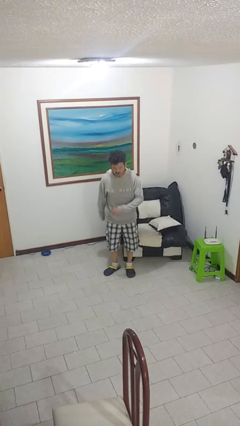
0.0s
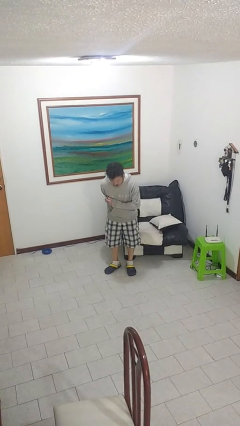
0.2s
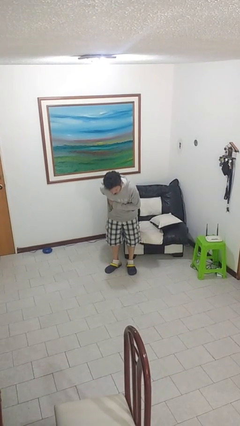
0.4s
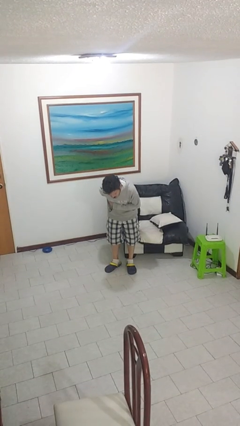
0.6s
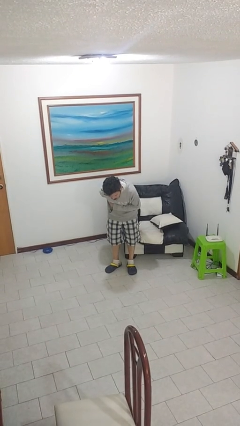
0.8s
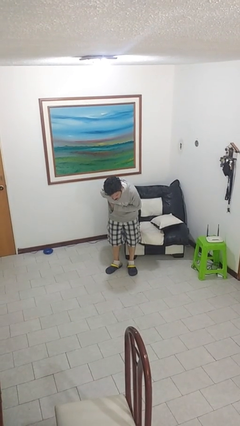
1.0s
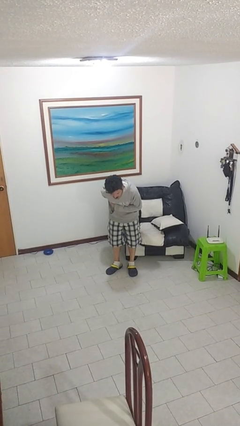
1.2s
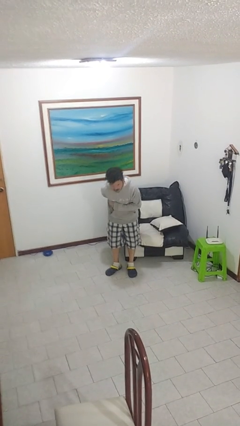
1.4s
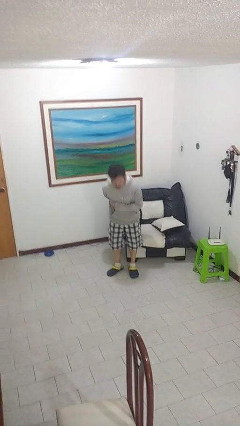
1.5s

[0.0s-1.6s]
person bows

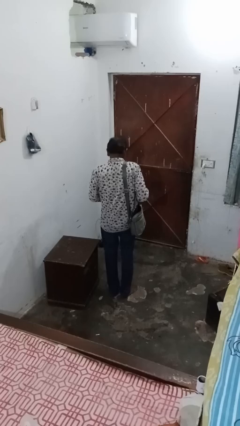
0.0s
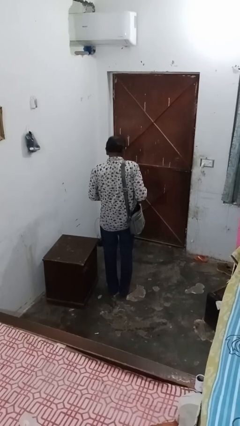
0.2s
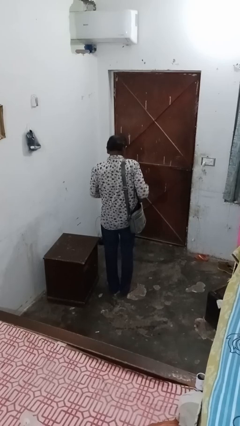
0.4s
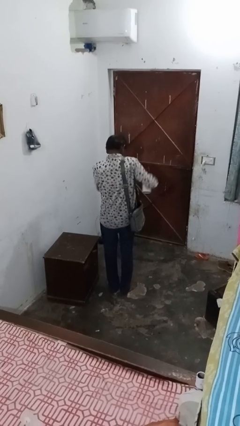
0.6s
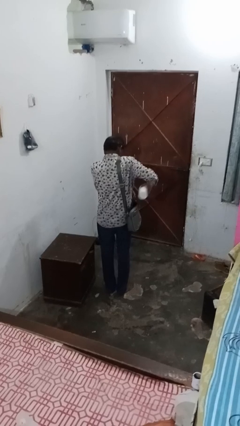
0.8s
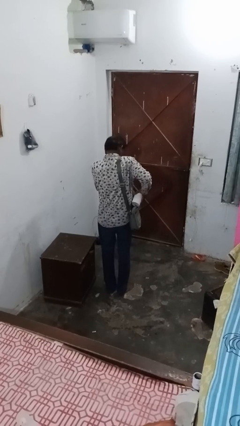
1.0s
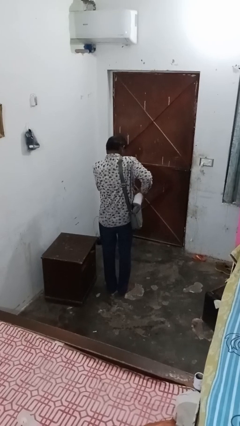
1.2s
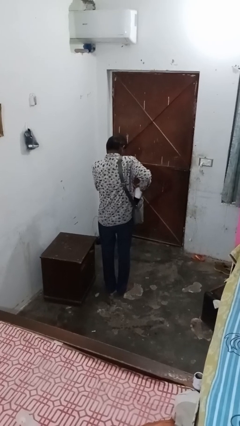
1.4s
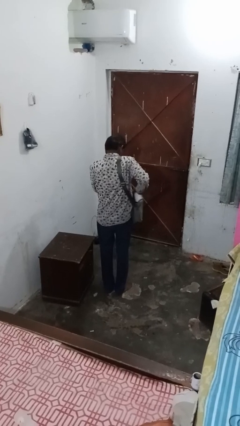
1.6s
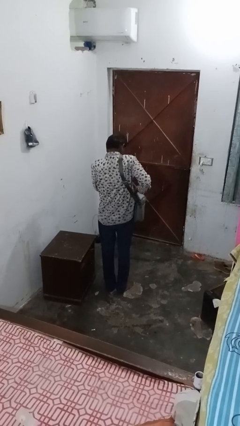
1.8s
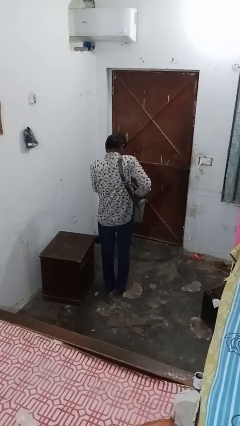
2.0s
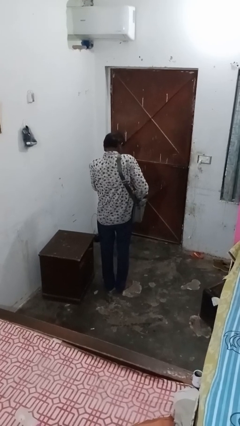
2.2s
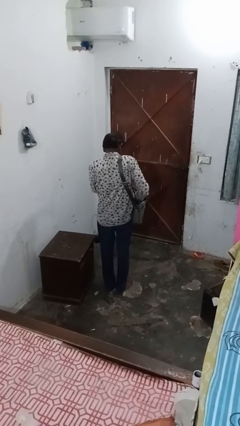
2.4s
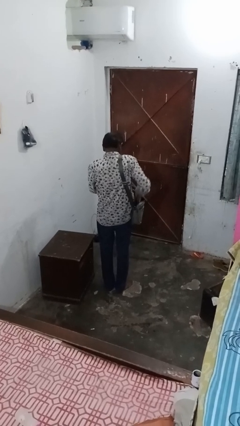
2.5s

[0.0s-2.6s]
person puts object into bag

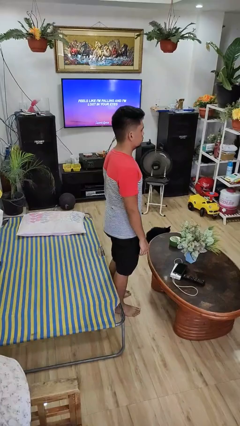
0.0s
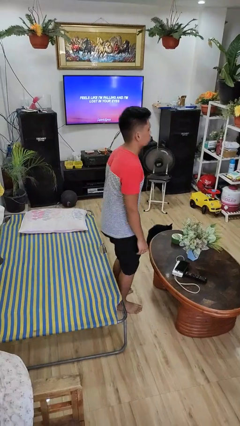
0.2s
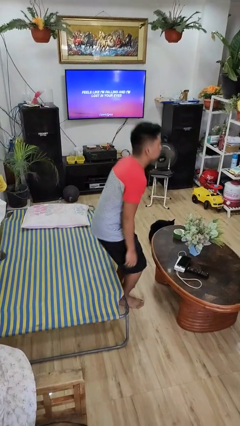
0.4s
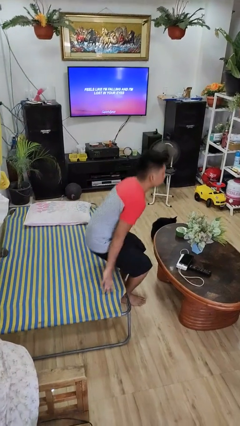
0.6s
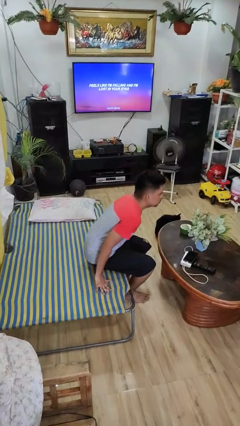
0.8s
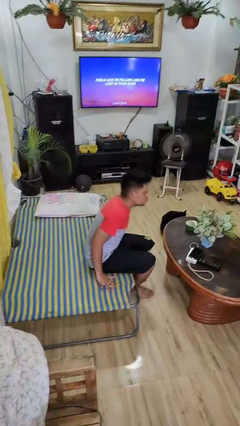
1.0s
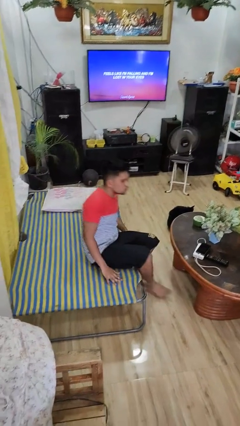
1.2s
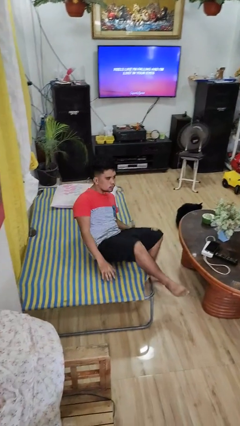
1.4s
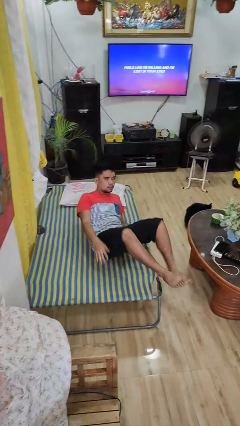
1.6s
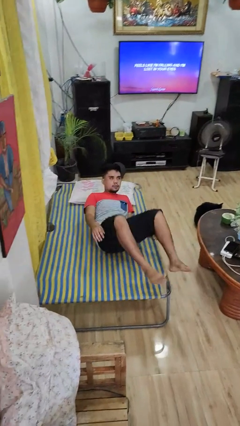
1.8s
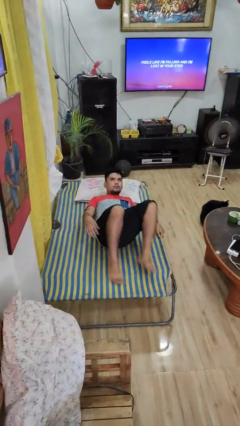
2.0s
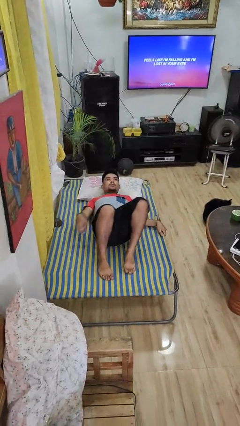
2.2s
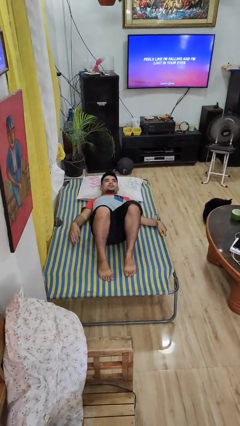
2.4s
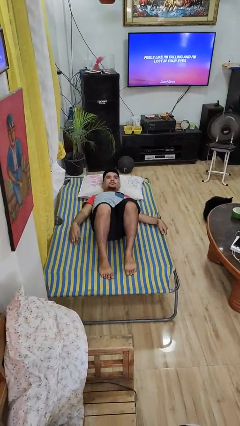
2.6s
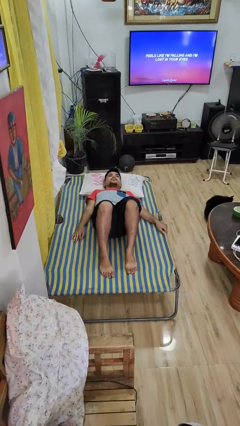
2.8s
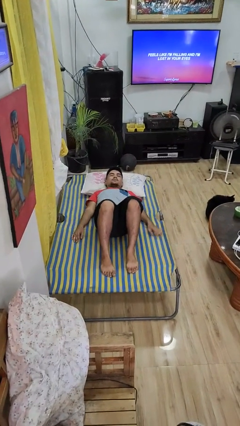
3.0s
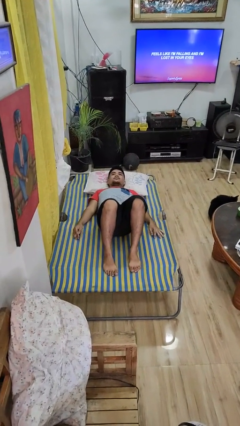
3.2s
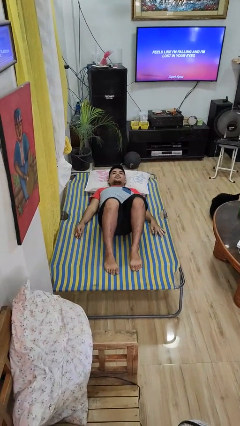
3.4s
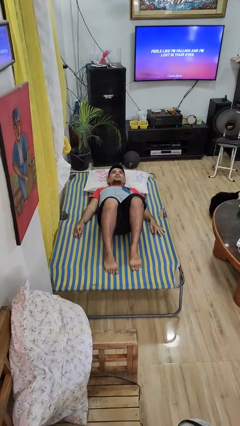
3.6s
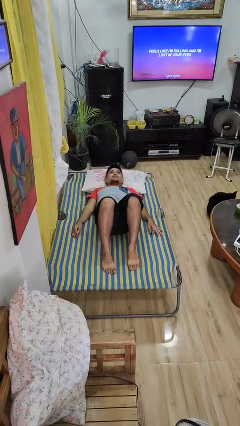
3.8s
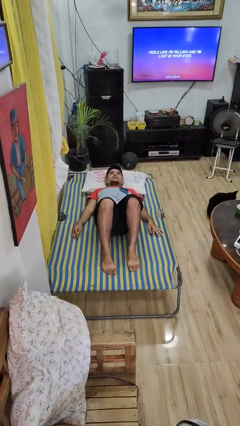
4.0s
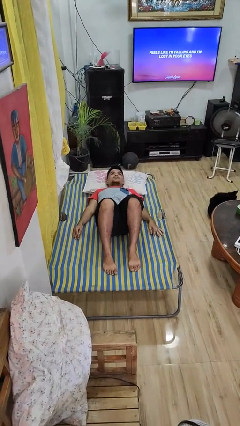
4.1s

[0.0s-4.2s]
person lies down on bed

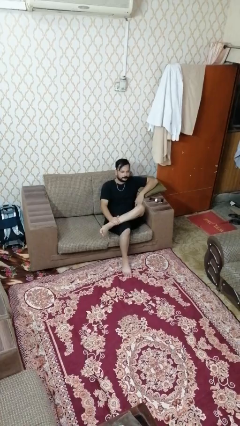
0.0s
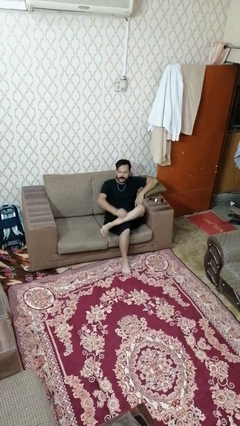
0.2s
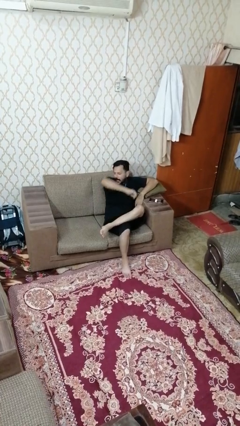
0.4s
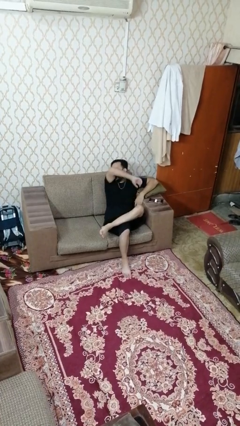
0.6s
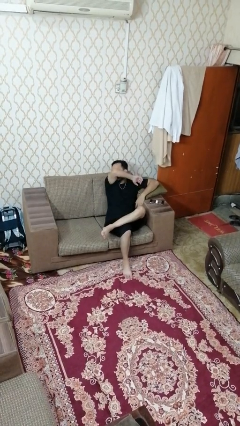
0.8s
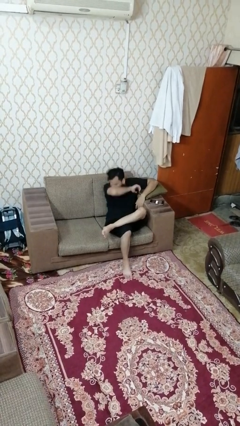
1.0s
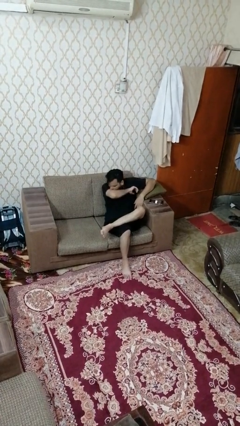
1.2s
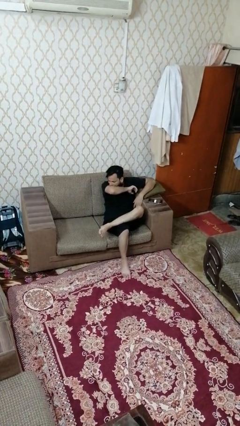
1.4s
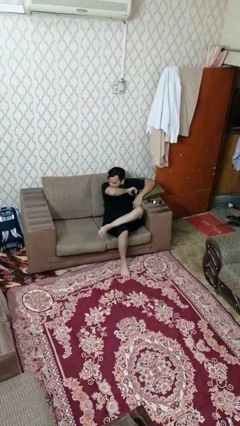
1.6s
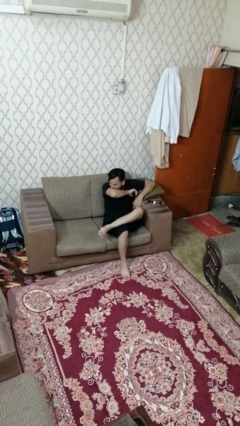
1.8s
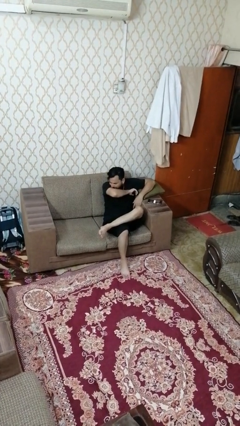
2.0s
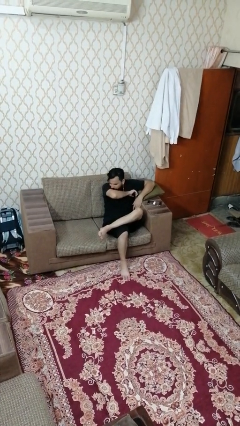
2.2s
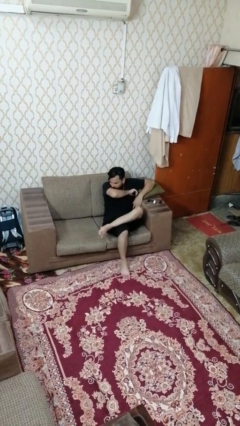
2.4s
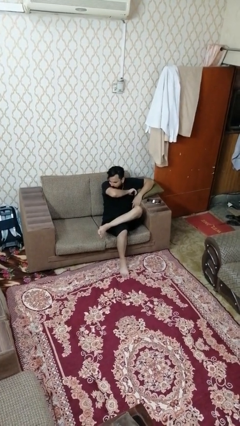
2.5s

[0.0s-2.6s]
person sneezes into arm

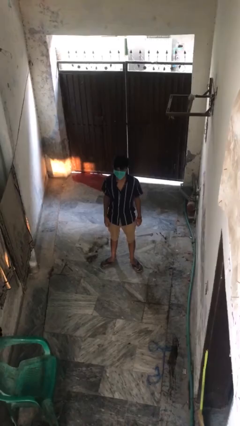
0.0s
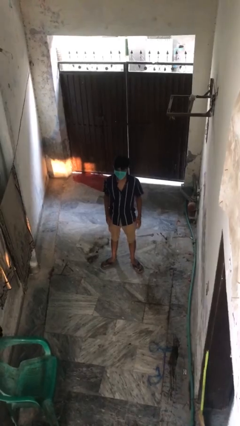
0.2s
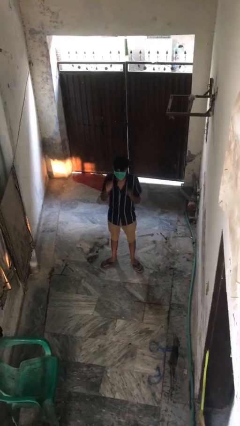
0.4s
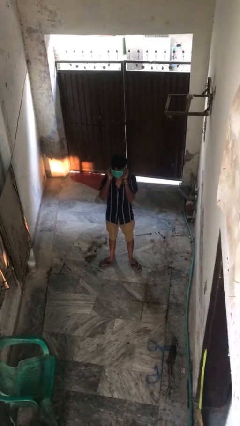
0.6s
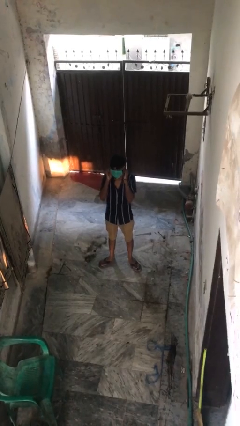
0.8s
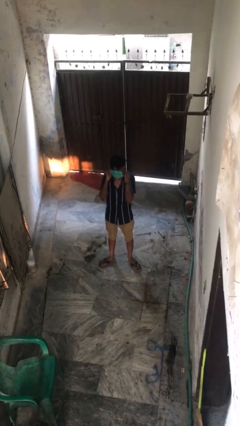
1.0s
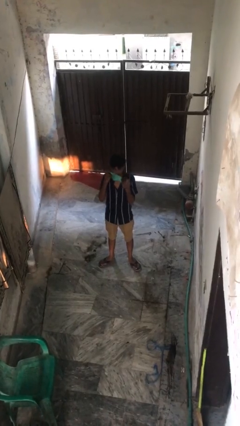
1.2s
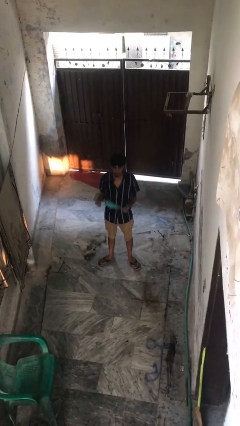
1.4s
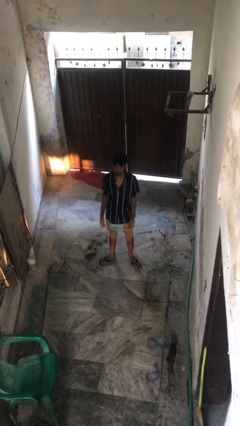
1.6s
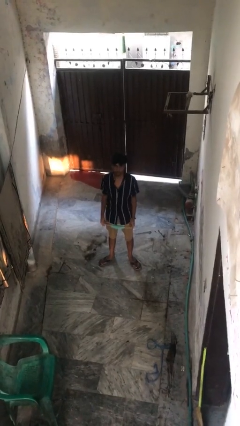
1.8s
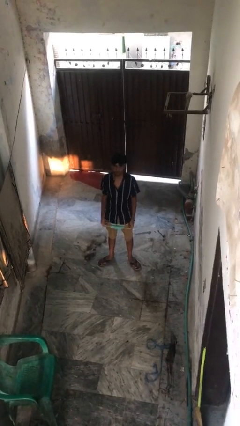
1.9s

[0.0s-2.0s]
person takes off facemask

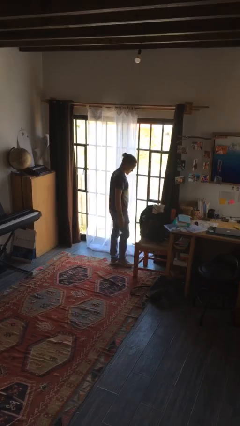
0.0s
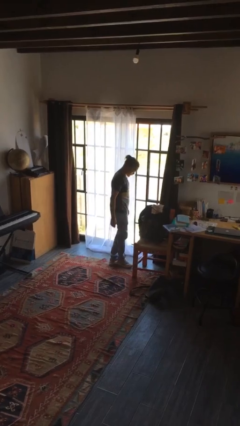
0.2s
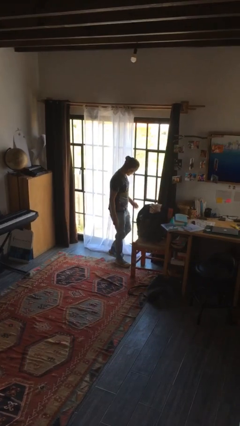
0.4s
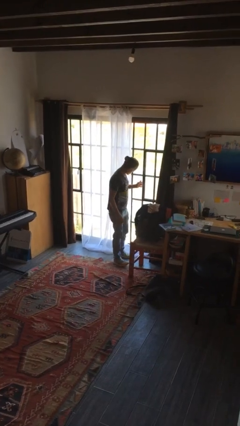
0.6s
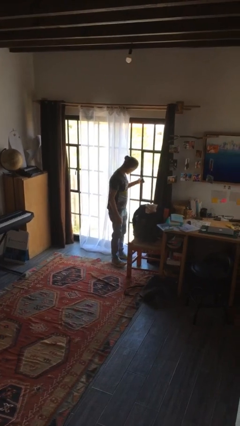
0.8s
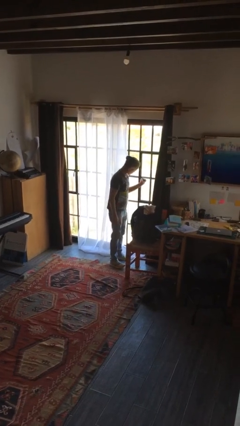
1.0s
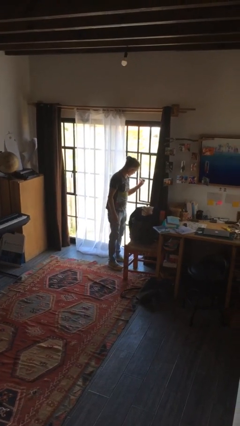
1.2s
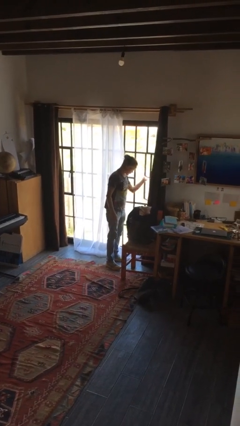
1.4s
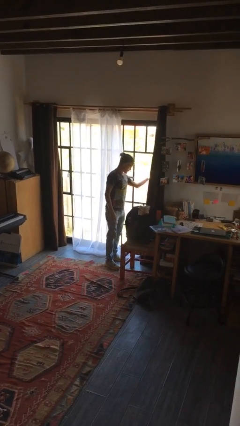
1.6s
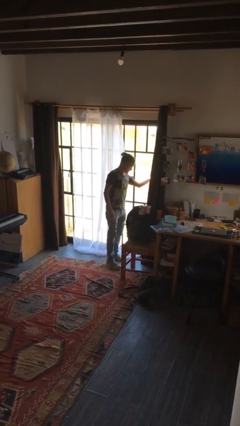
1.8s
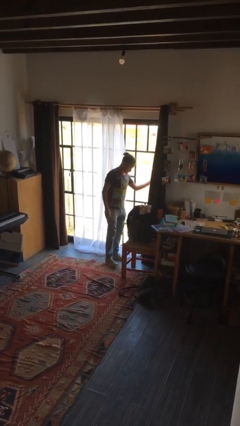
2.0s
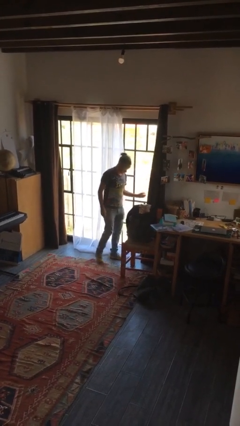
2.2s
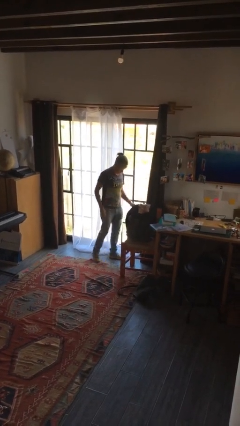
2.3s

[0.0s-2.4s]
person opens home window

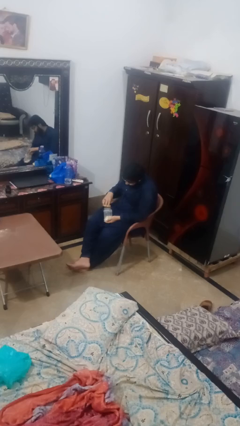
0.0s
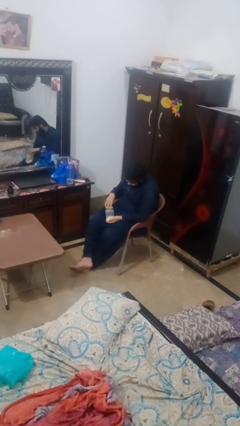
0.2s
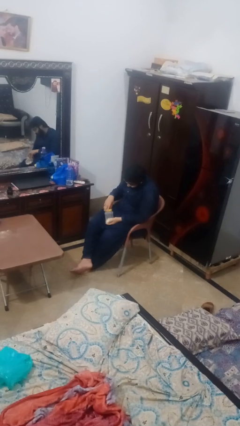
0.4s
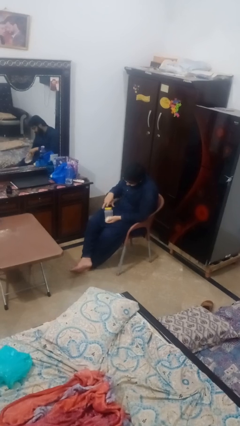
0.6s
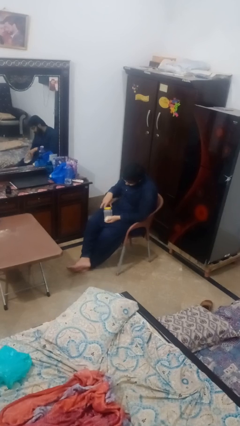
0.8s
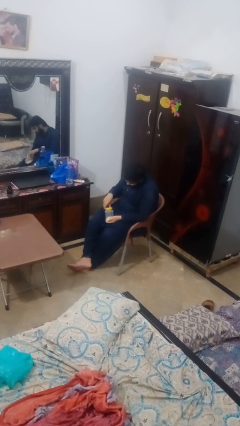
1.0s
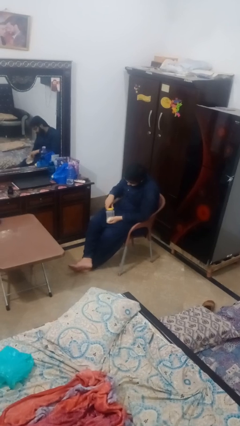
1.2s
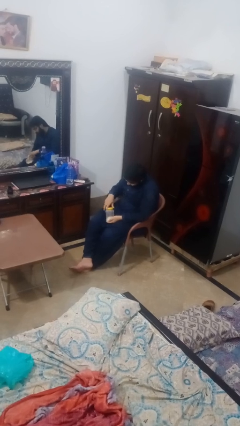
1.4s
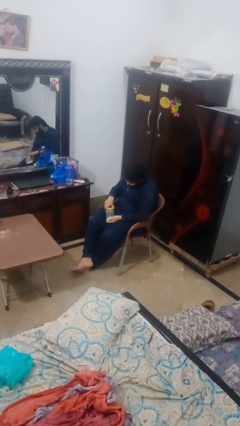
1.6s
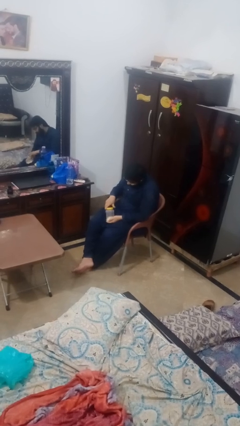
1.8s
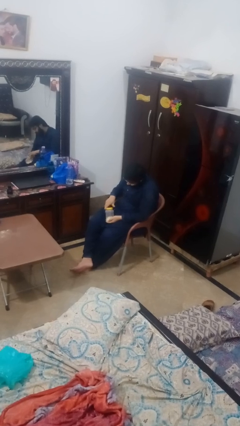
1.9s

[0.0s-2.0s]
person closes jar
